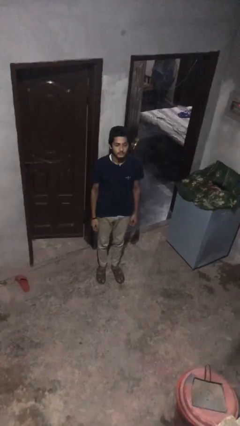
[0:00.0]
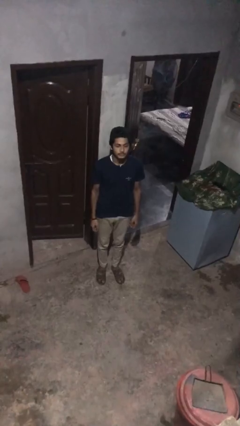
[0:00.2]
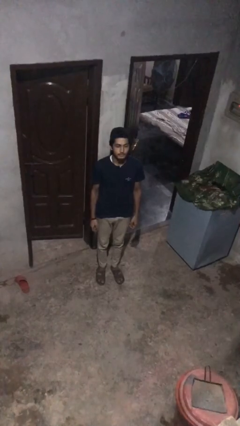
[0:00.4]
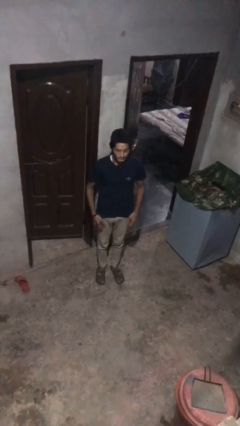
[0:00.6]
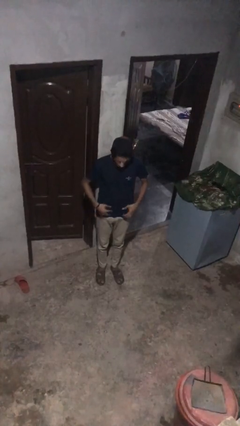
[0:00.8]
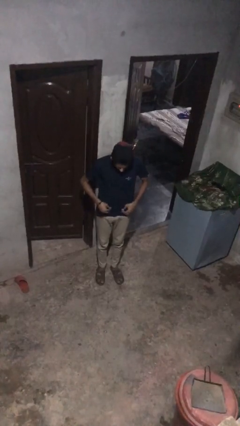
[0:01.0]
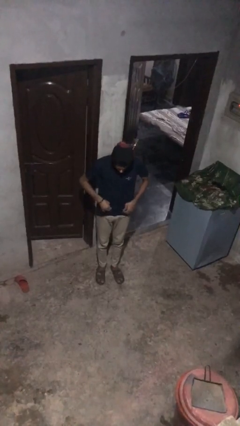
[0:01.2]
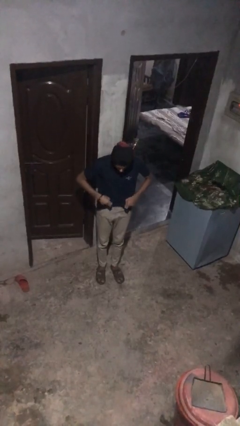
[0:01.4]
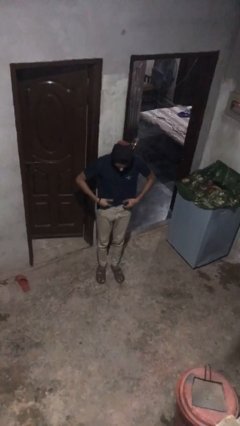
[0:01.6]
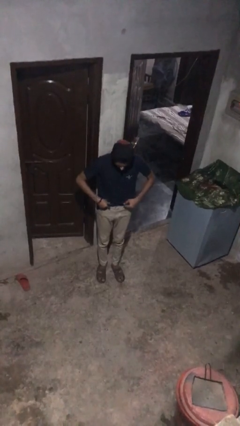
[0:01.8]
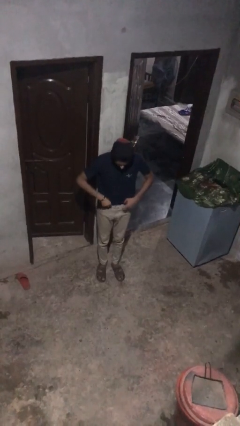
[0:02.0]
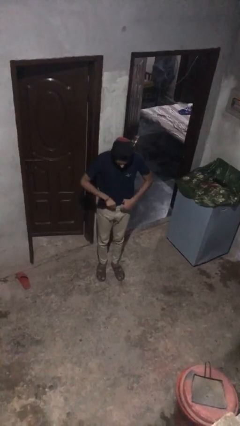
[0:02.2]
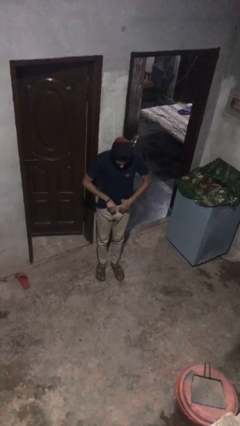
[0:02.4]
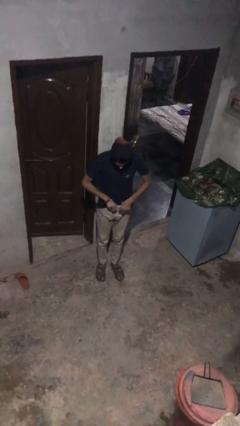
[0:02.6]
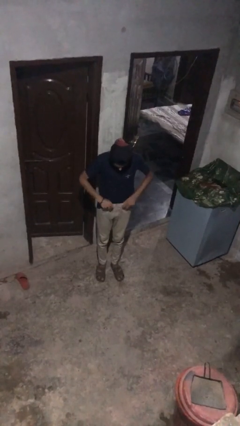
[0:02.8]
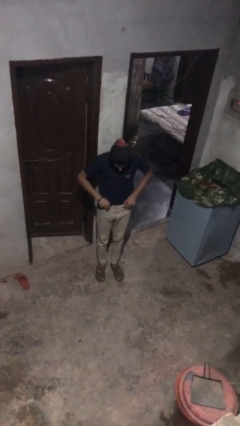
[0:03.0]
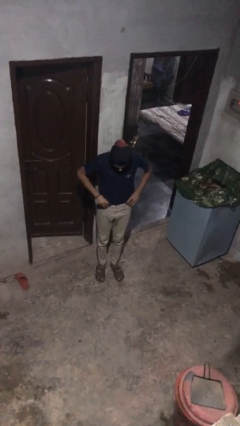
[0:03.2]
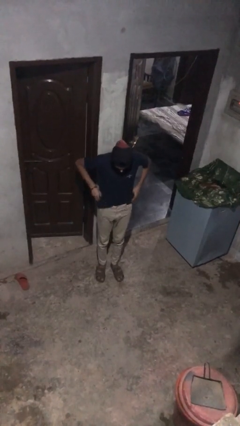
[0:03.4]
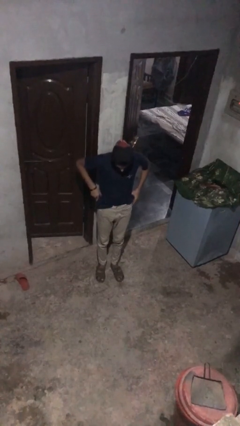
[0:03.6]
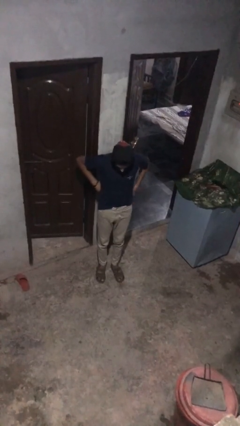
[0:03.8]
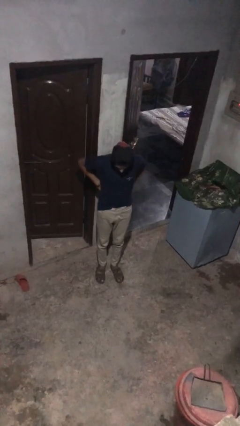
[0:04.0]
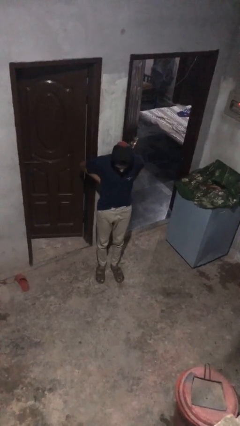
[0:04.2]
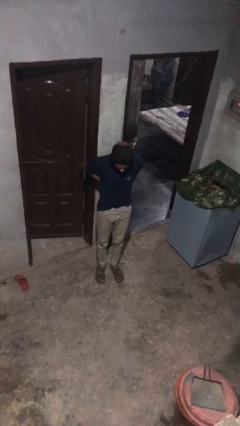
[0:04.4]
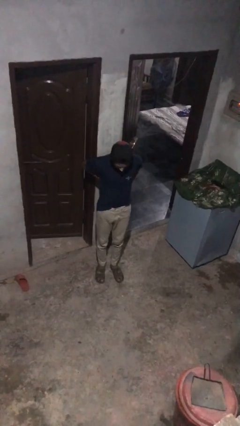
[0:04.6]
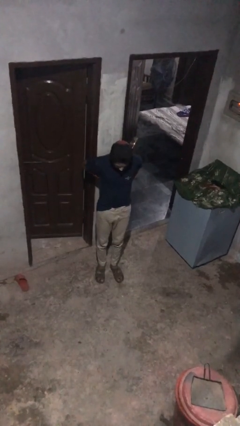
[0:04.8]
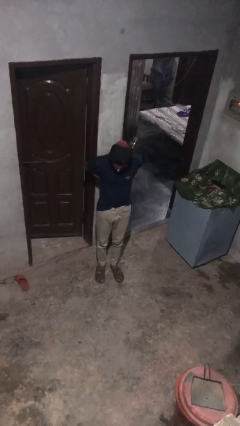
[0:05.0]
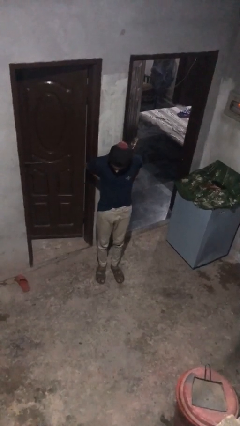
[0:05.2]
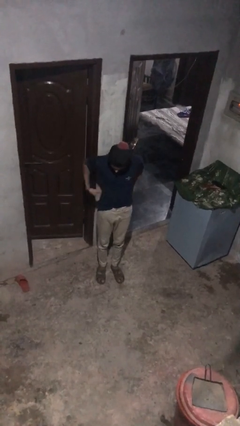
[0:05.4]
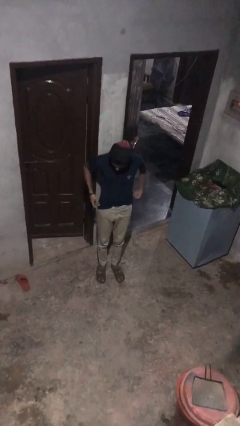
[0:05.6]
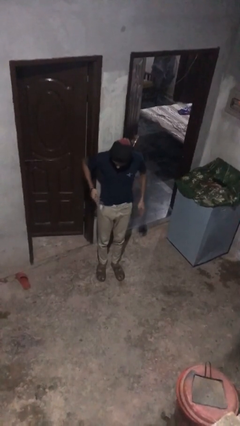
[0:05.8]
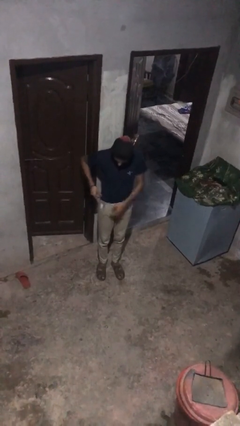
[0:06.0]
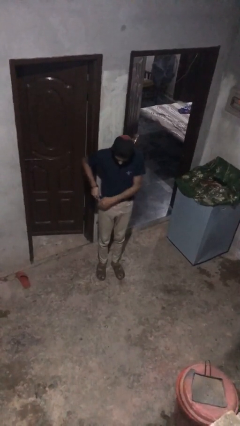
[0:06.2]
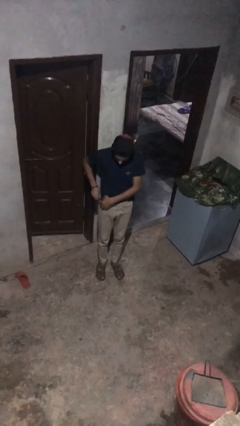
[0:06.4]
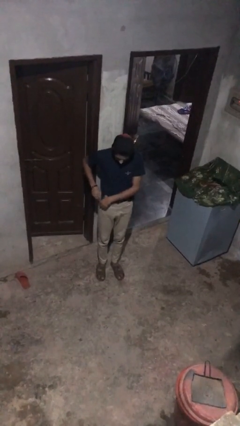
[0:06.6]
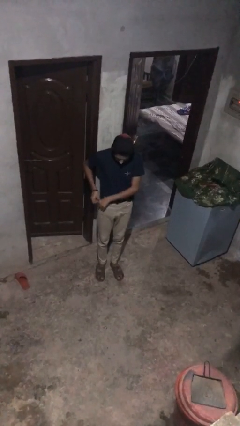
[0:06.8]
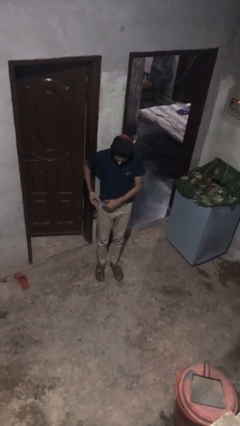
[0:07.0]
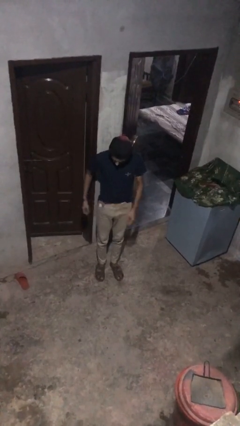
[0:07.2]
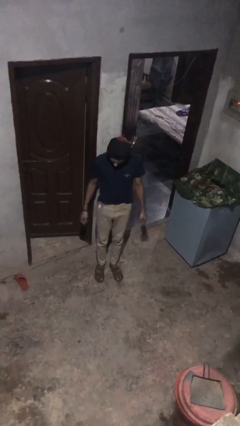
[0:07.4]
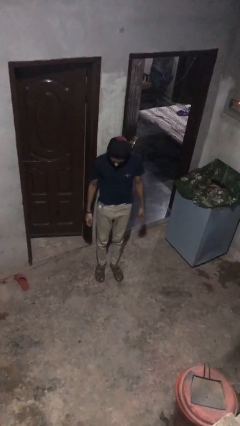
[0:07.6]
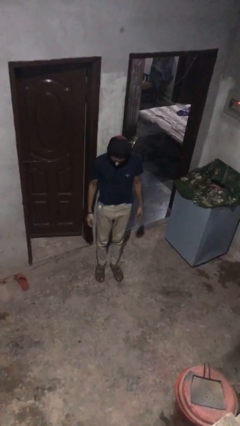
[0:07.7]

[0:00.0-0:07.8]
person tucks in shirt

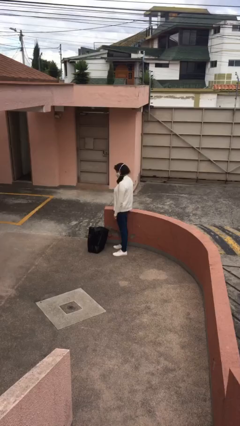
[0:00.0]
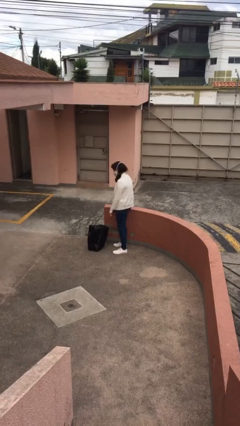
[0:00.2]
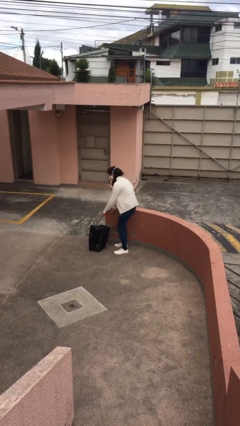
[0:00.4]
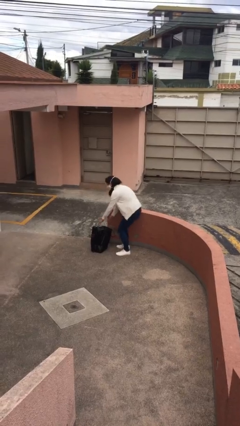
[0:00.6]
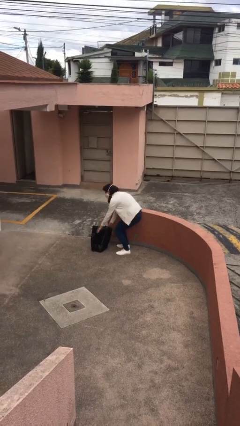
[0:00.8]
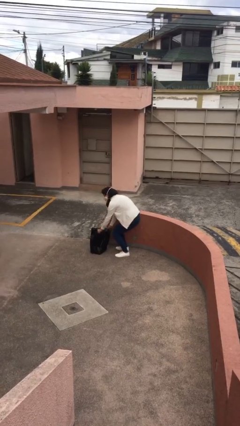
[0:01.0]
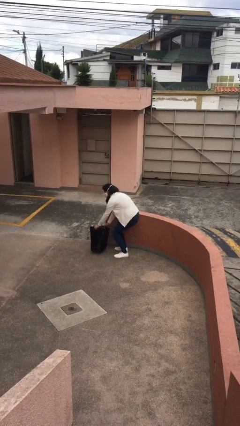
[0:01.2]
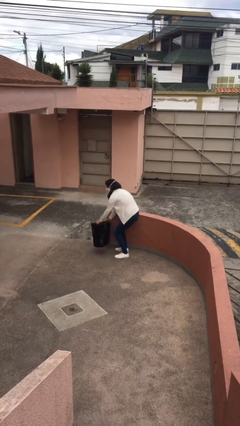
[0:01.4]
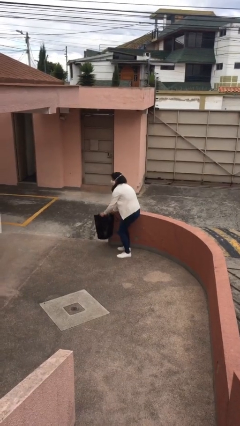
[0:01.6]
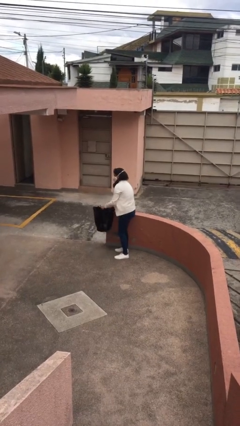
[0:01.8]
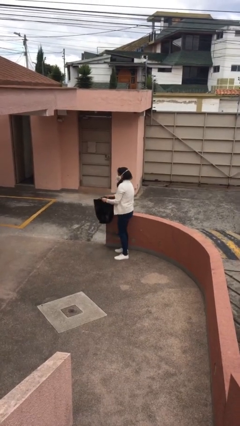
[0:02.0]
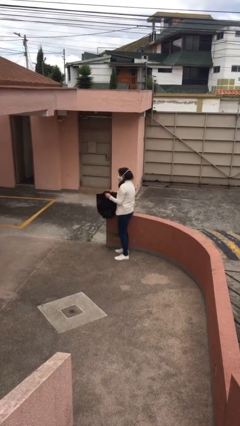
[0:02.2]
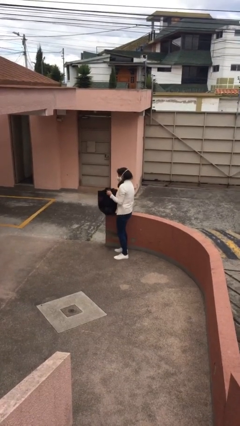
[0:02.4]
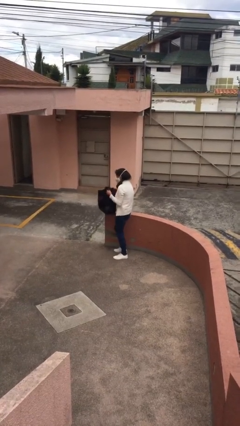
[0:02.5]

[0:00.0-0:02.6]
person picks up object from floor

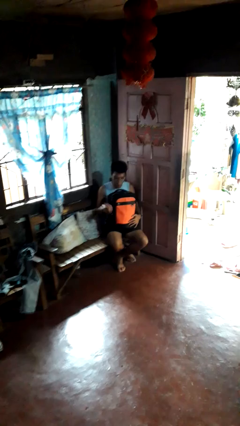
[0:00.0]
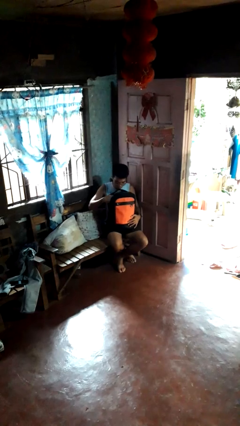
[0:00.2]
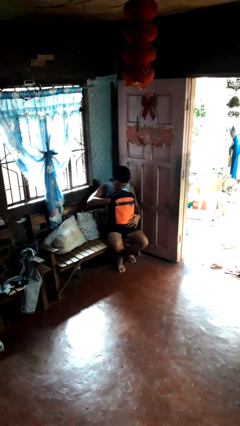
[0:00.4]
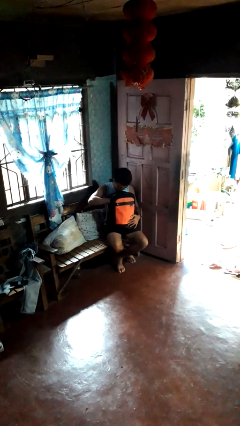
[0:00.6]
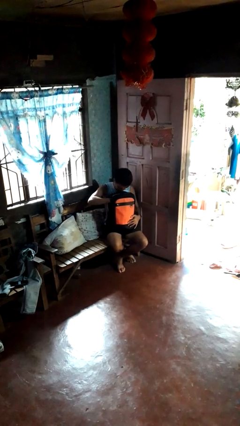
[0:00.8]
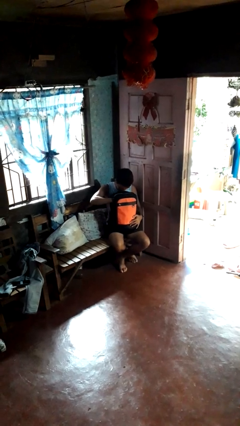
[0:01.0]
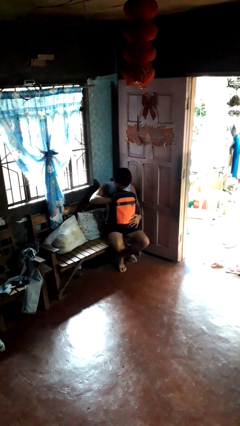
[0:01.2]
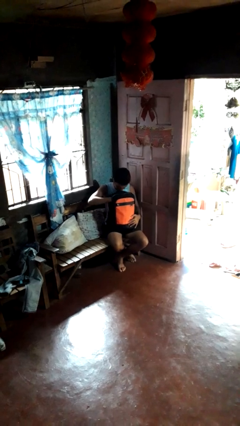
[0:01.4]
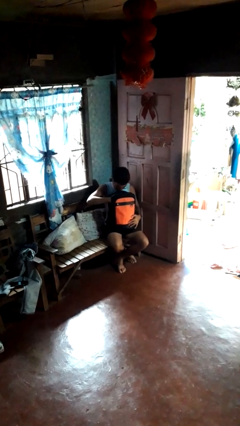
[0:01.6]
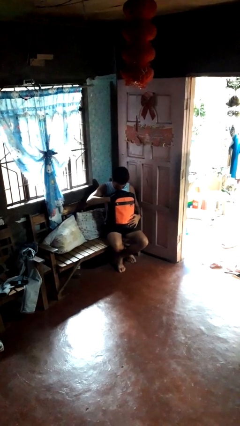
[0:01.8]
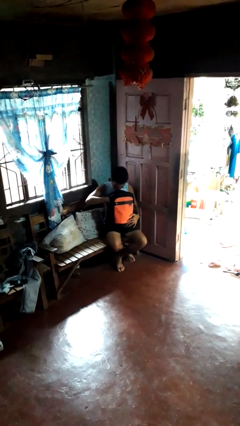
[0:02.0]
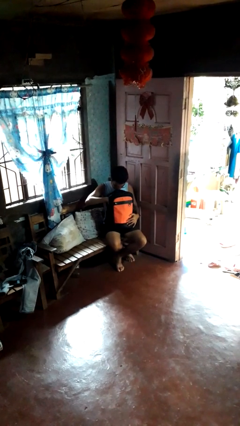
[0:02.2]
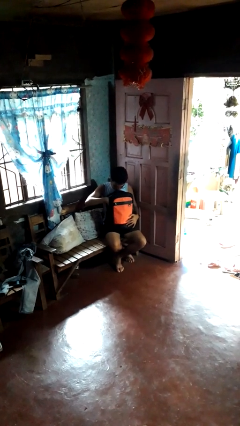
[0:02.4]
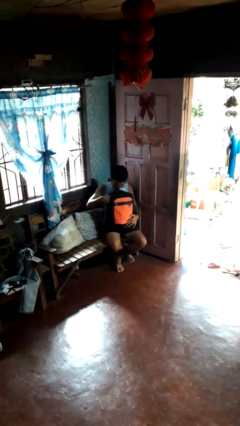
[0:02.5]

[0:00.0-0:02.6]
person searches in bag

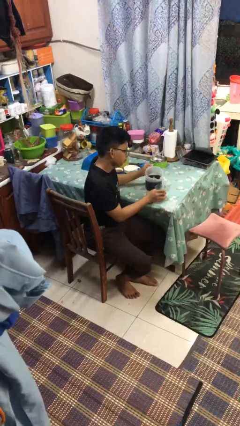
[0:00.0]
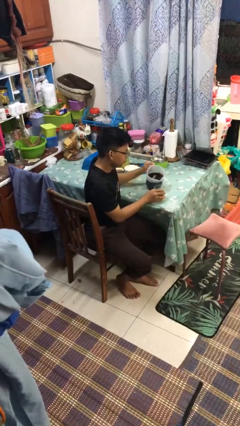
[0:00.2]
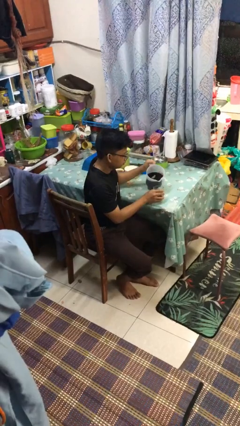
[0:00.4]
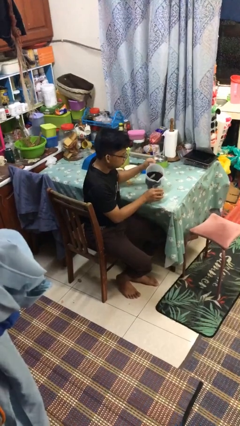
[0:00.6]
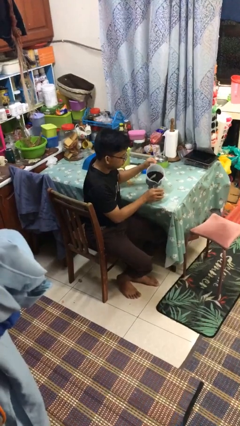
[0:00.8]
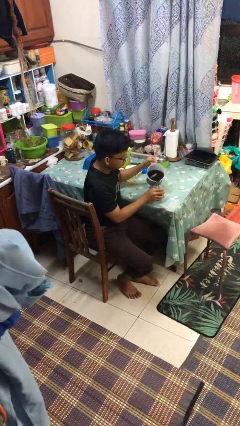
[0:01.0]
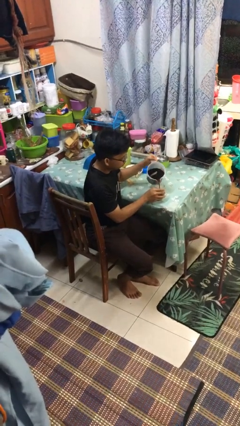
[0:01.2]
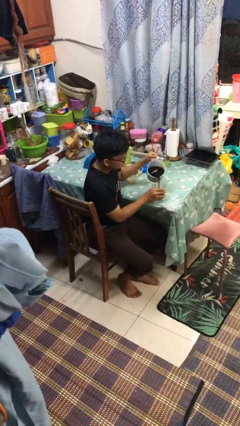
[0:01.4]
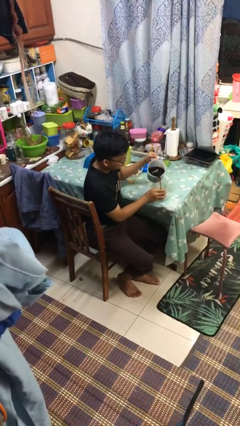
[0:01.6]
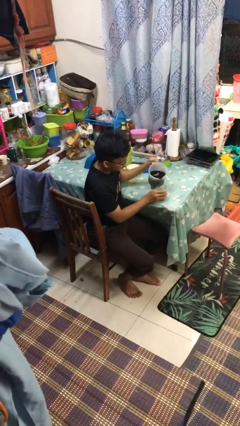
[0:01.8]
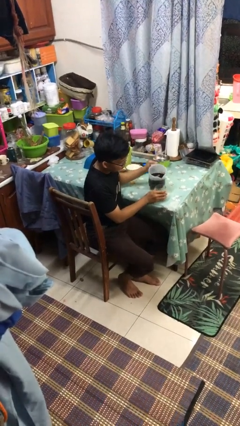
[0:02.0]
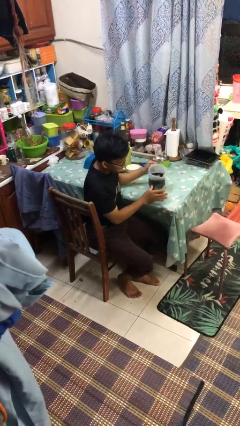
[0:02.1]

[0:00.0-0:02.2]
person pours coffee into mug

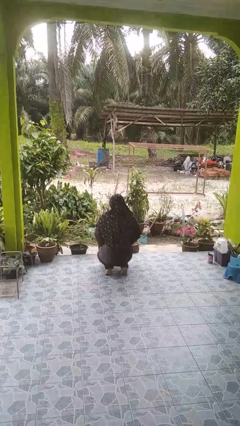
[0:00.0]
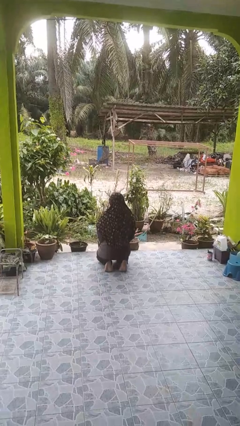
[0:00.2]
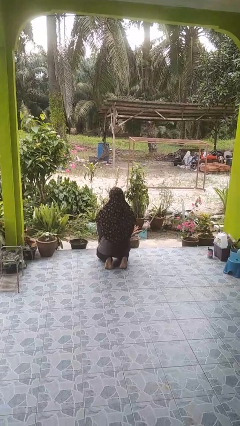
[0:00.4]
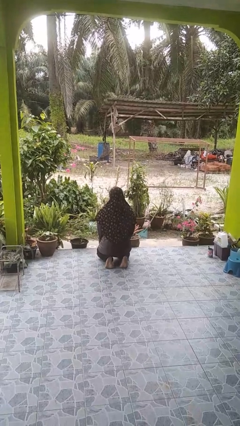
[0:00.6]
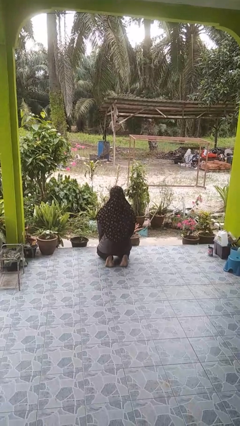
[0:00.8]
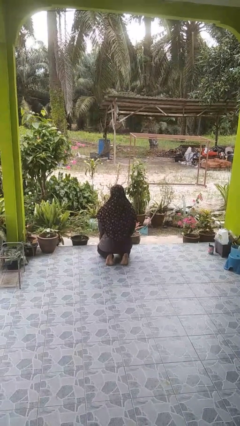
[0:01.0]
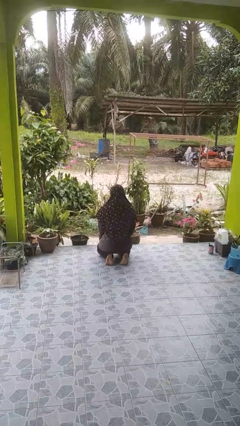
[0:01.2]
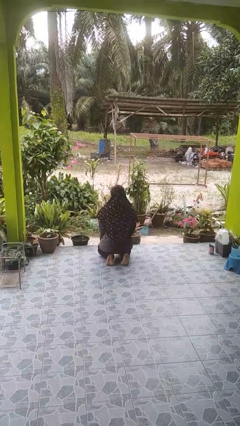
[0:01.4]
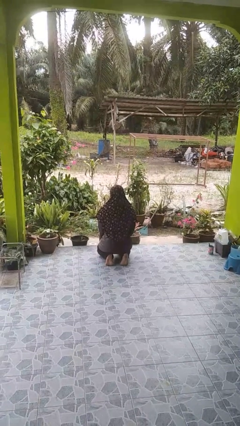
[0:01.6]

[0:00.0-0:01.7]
person kneels

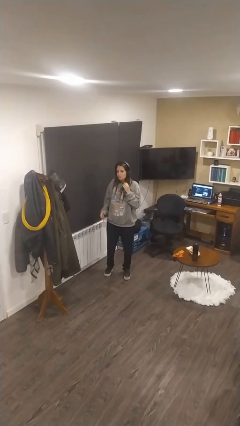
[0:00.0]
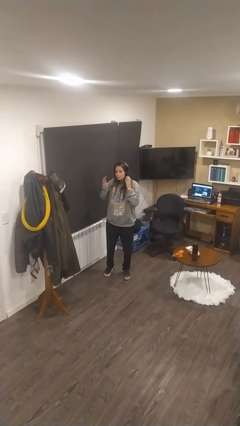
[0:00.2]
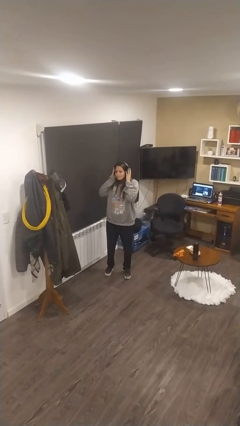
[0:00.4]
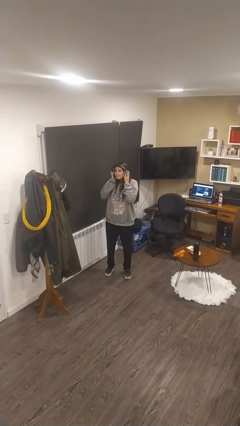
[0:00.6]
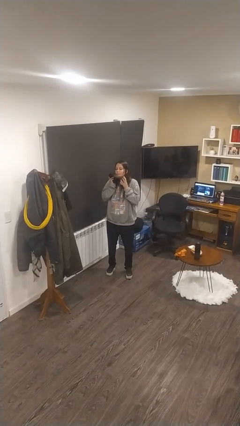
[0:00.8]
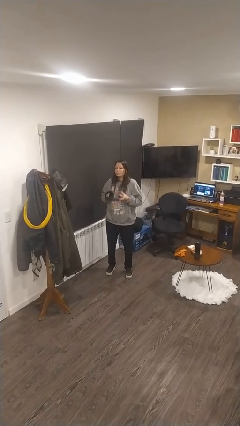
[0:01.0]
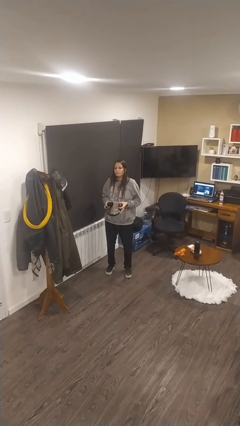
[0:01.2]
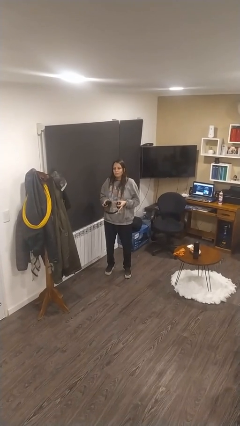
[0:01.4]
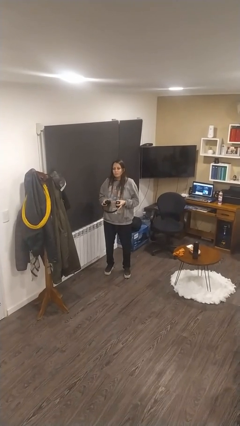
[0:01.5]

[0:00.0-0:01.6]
person takes off headphones
